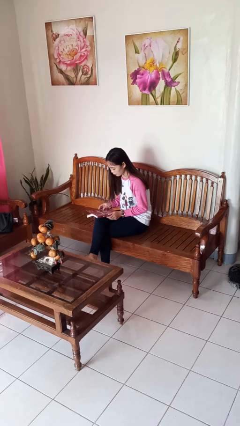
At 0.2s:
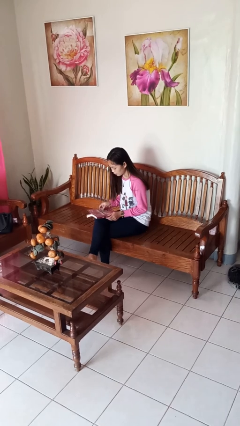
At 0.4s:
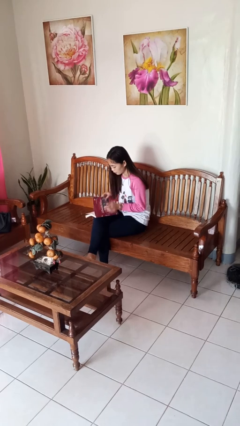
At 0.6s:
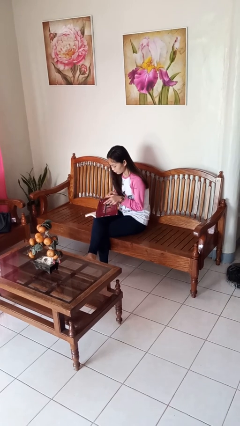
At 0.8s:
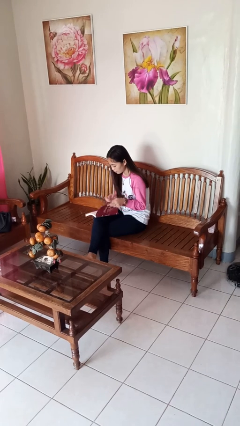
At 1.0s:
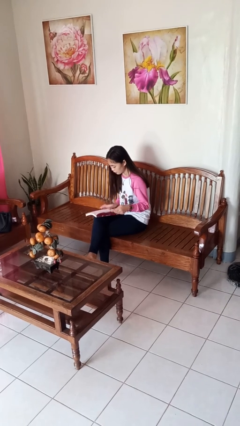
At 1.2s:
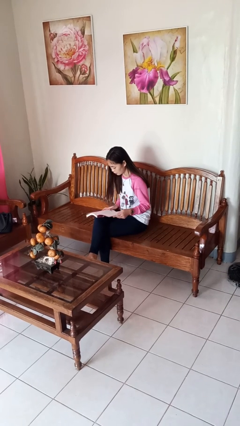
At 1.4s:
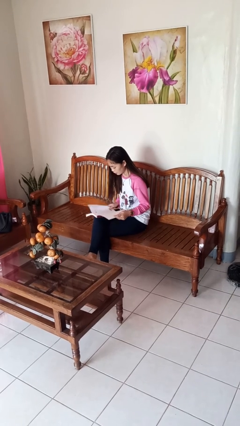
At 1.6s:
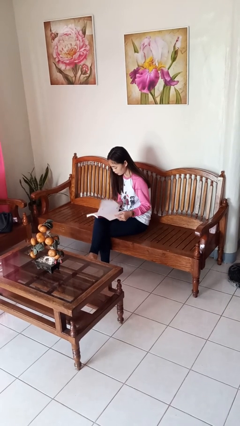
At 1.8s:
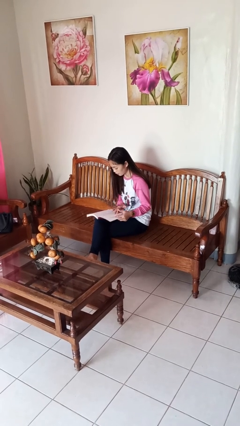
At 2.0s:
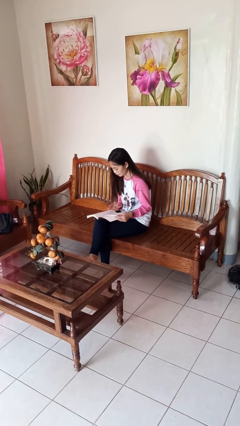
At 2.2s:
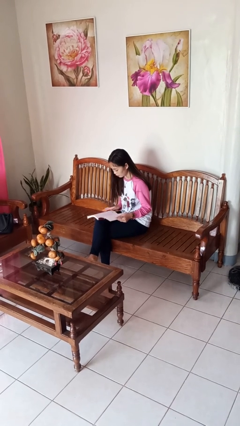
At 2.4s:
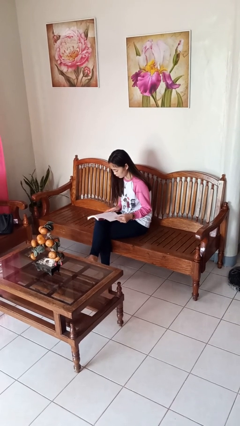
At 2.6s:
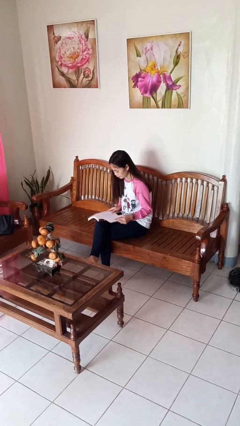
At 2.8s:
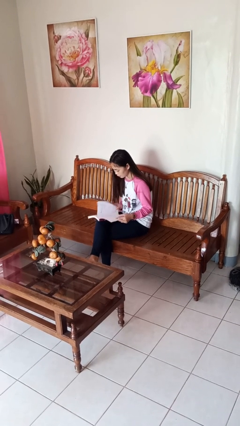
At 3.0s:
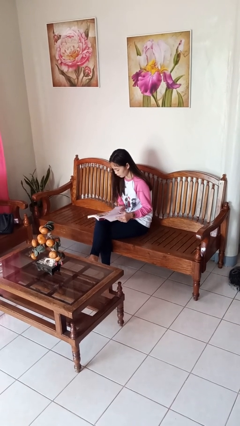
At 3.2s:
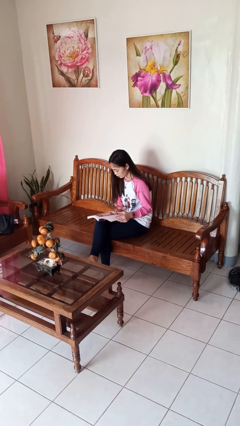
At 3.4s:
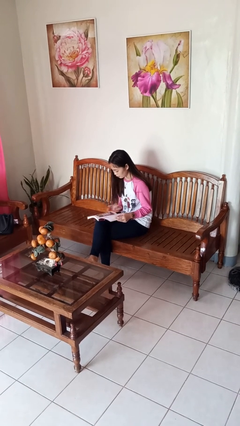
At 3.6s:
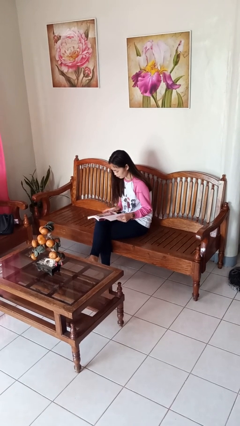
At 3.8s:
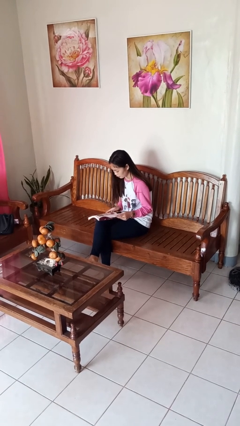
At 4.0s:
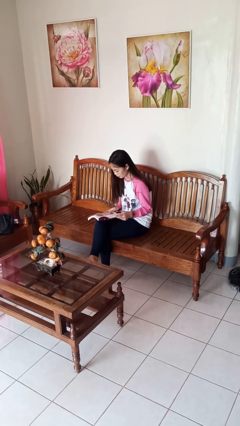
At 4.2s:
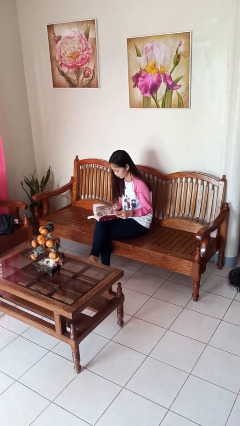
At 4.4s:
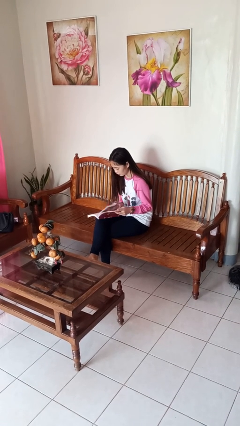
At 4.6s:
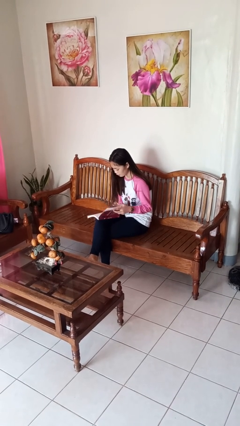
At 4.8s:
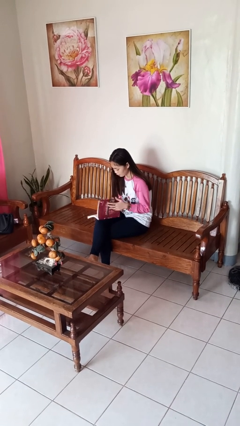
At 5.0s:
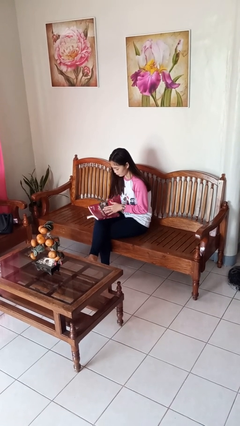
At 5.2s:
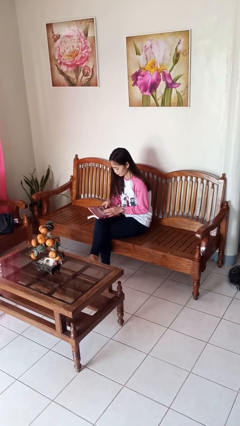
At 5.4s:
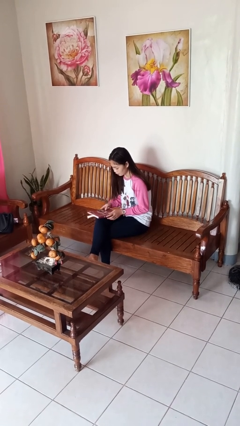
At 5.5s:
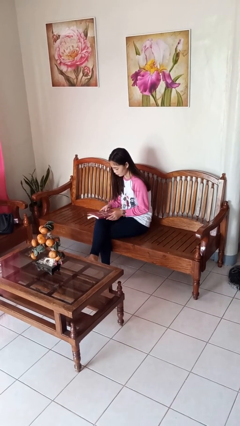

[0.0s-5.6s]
person reads book

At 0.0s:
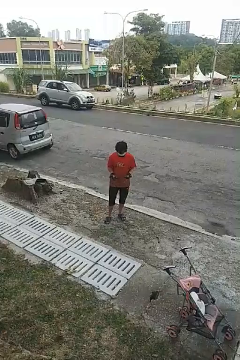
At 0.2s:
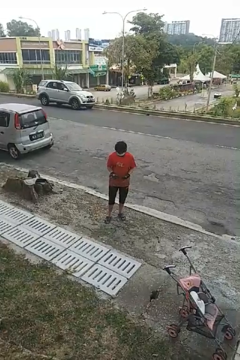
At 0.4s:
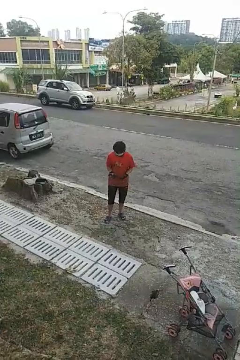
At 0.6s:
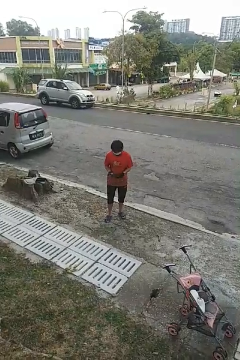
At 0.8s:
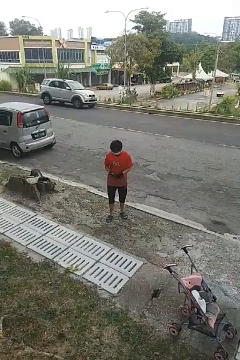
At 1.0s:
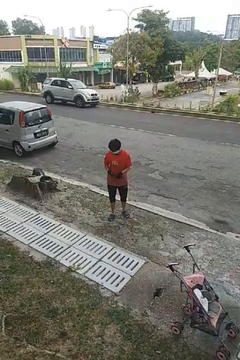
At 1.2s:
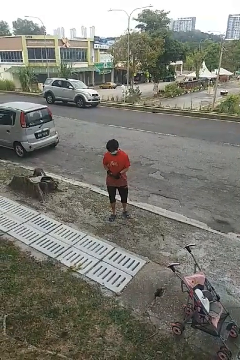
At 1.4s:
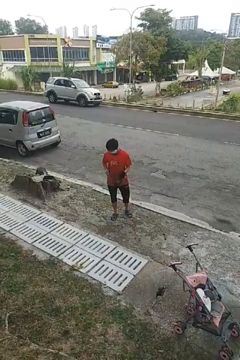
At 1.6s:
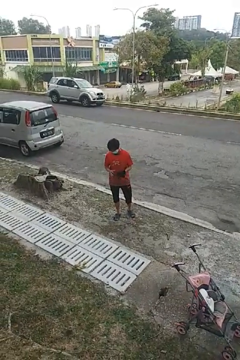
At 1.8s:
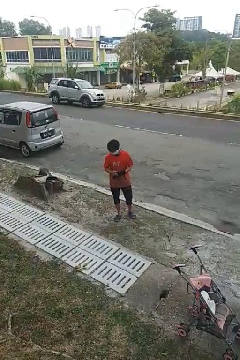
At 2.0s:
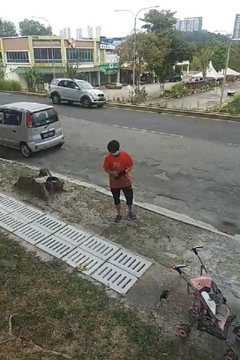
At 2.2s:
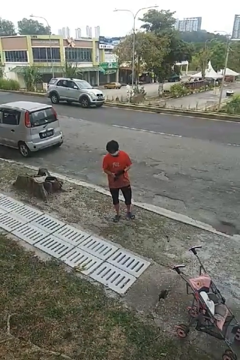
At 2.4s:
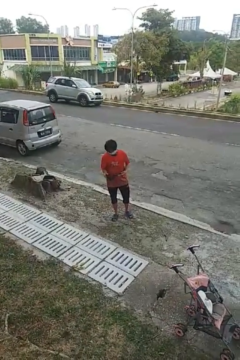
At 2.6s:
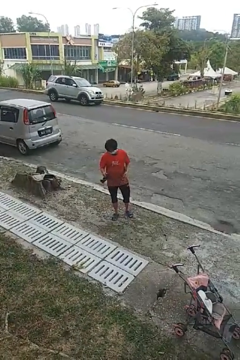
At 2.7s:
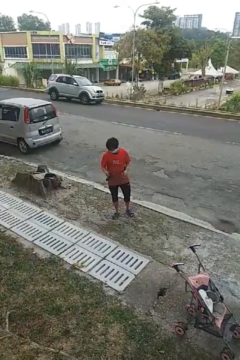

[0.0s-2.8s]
person takes off gloves

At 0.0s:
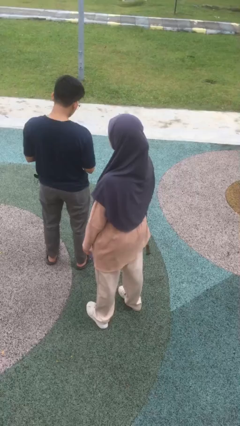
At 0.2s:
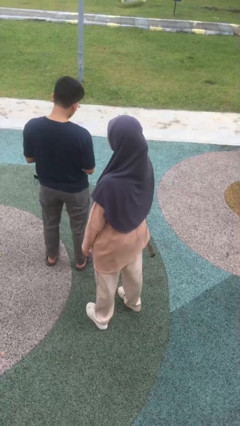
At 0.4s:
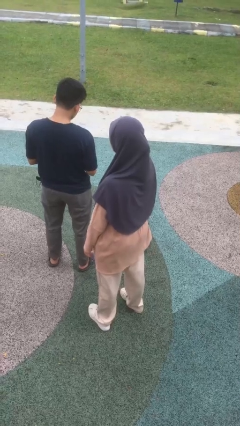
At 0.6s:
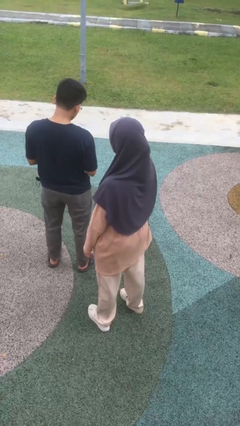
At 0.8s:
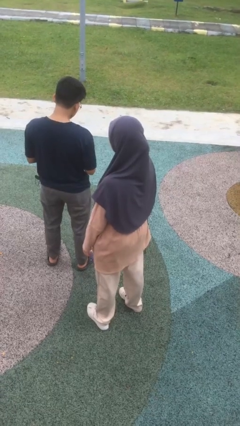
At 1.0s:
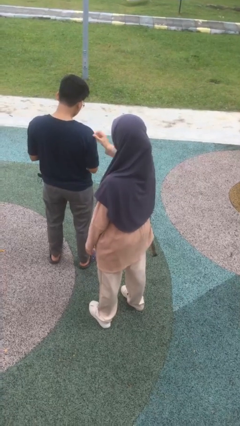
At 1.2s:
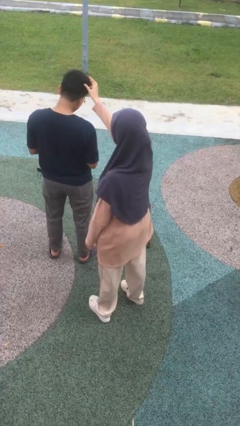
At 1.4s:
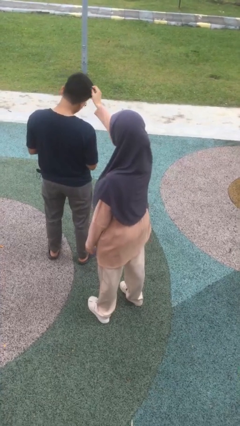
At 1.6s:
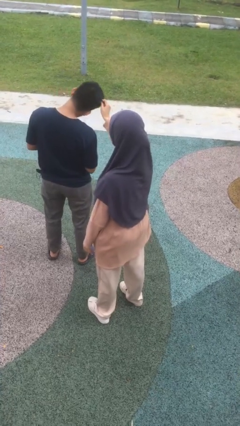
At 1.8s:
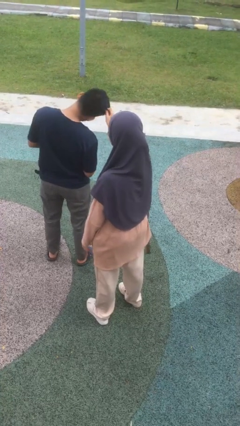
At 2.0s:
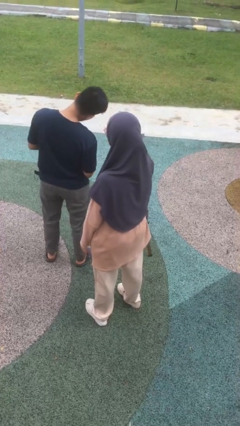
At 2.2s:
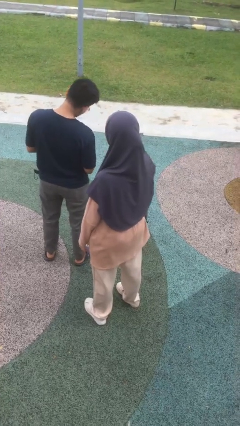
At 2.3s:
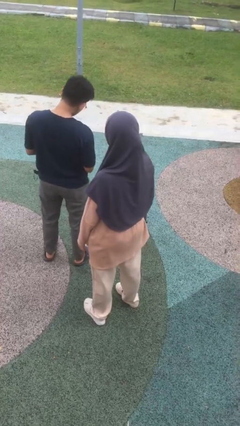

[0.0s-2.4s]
person grabs person by hair

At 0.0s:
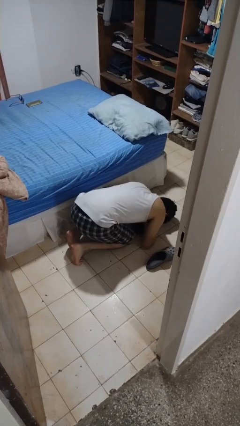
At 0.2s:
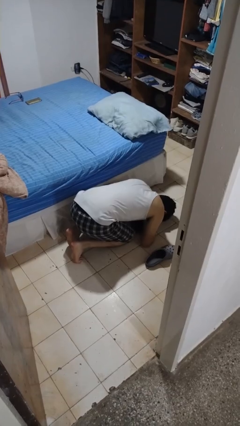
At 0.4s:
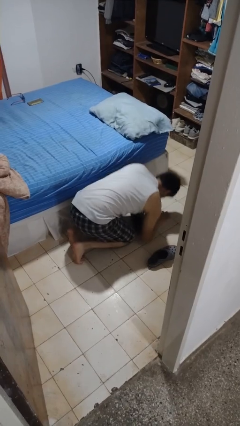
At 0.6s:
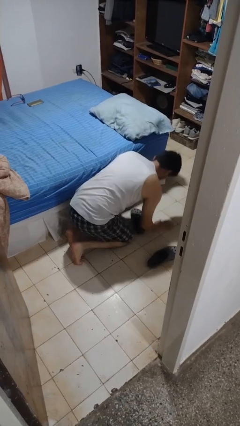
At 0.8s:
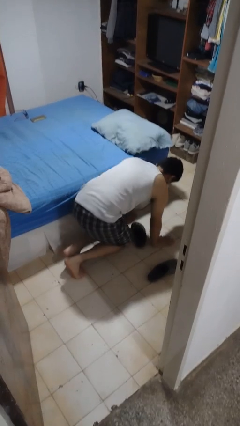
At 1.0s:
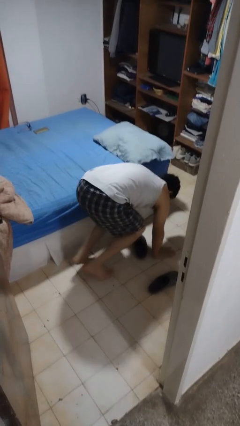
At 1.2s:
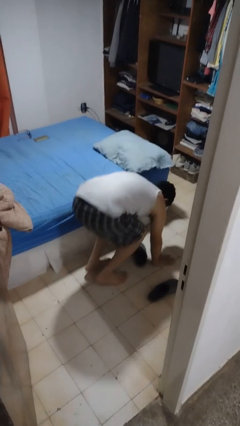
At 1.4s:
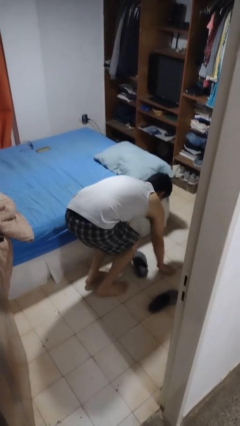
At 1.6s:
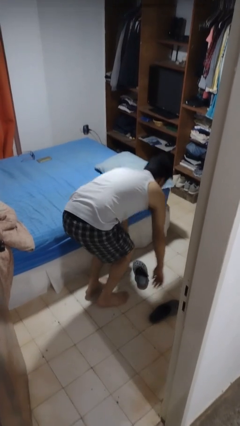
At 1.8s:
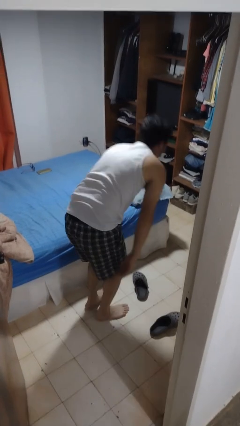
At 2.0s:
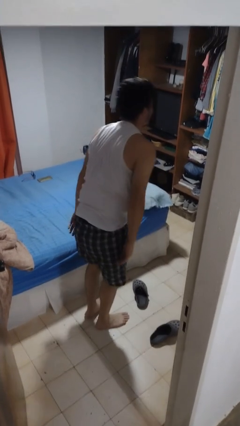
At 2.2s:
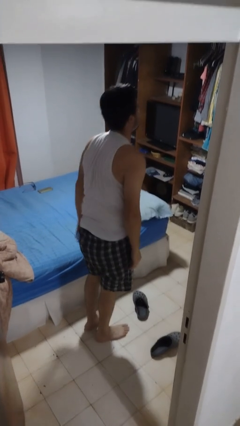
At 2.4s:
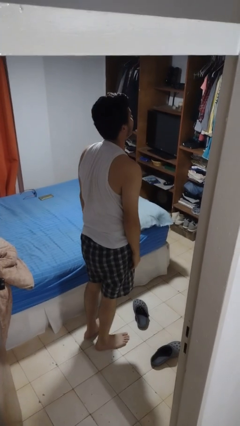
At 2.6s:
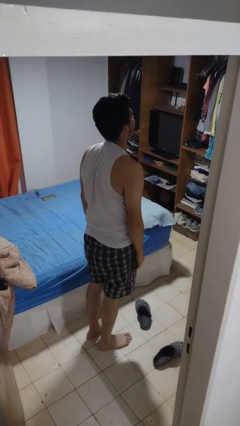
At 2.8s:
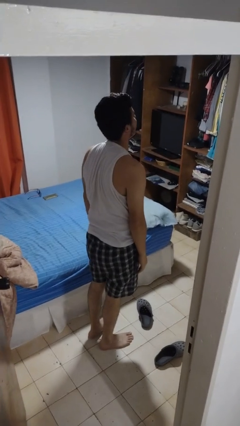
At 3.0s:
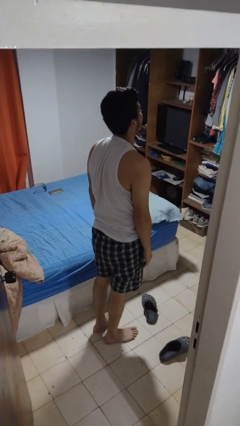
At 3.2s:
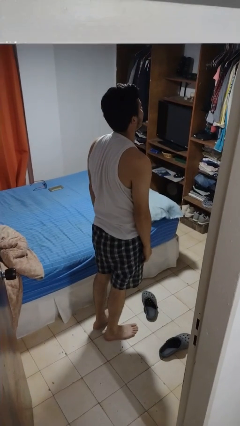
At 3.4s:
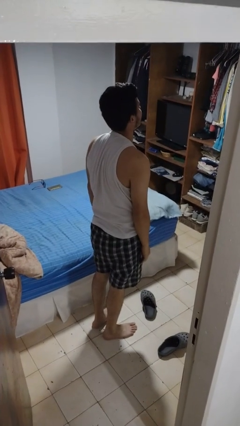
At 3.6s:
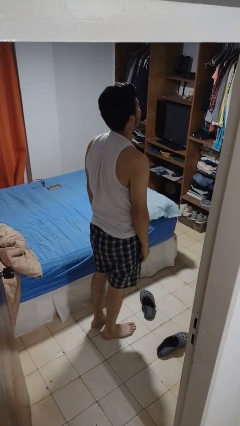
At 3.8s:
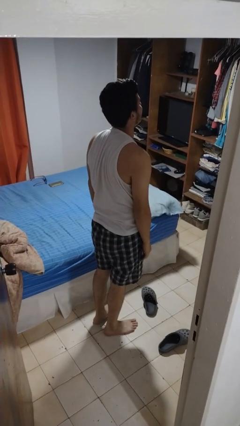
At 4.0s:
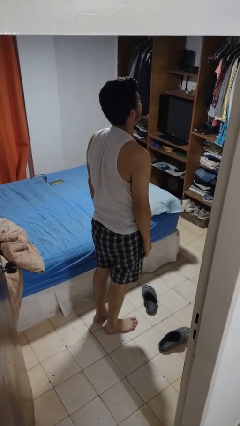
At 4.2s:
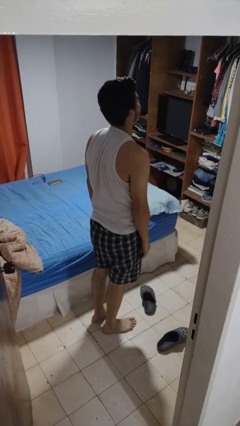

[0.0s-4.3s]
person stands up from floor

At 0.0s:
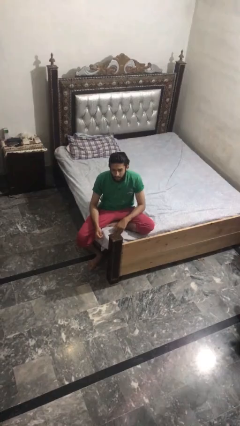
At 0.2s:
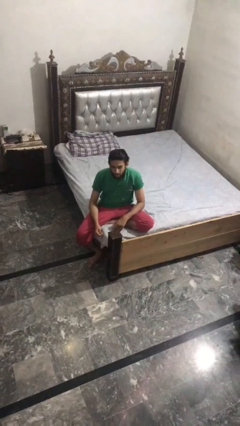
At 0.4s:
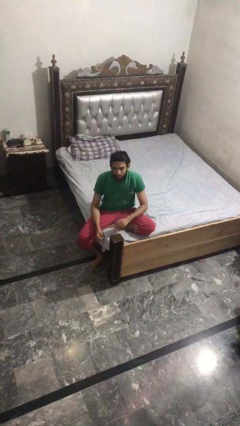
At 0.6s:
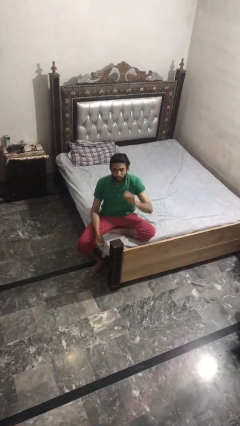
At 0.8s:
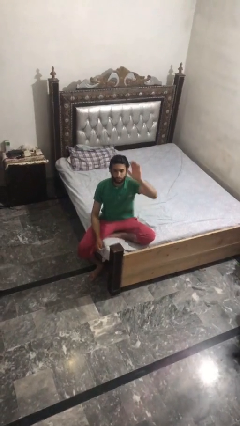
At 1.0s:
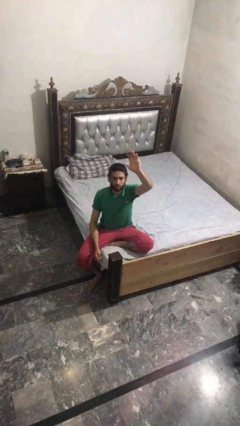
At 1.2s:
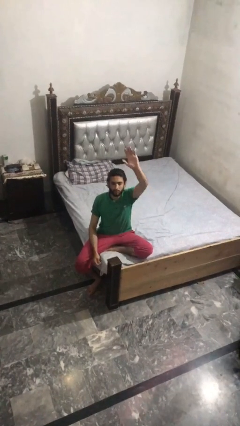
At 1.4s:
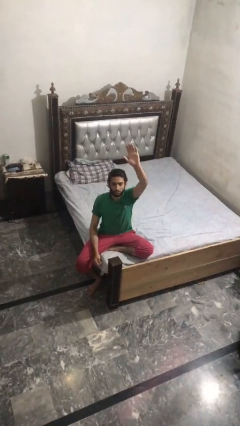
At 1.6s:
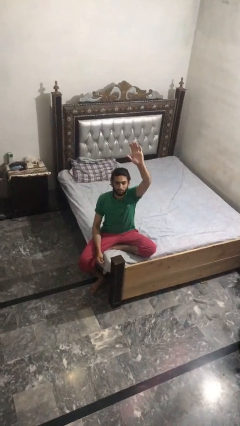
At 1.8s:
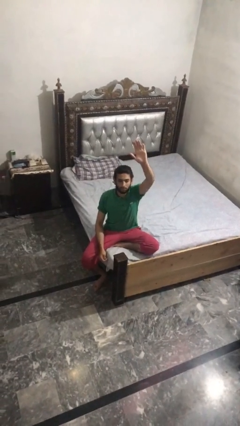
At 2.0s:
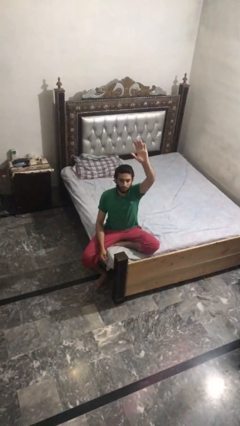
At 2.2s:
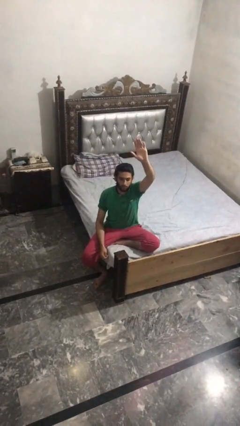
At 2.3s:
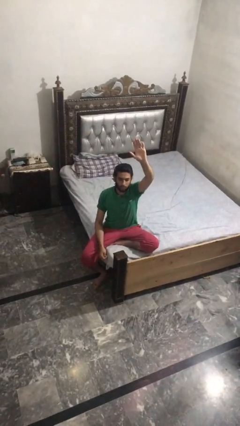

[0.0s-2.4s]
person gestures raise hand

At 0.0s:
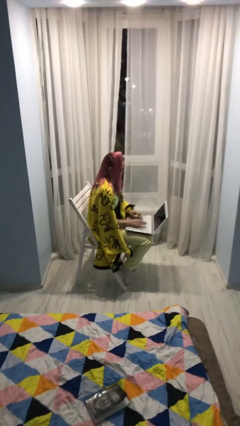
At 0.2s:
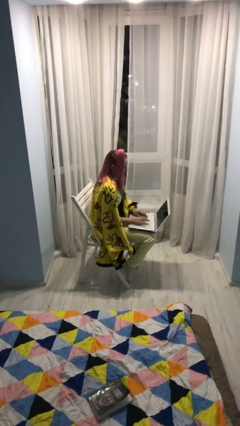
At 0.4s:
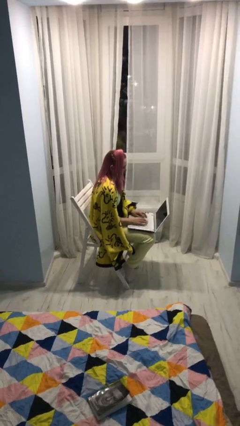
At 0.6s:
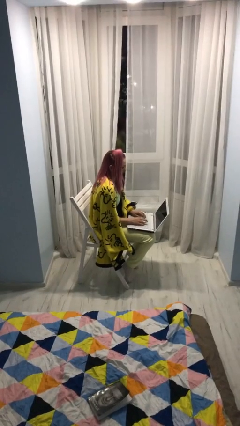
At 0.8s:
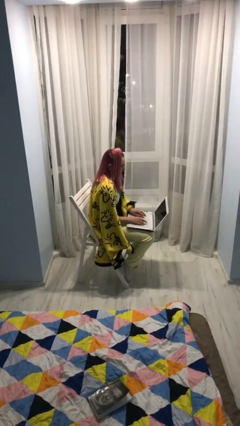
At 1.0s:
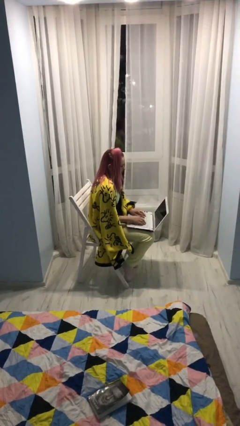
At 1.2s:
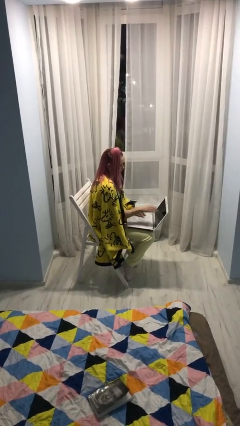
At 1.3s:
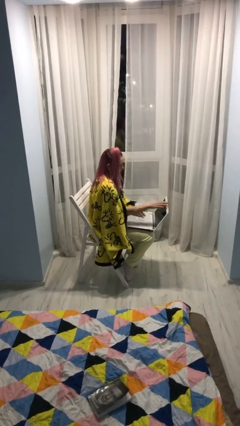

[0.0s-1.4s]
person interacts with laptop
